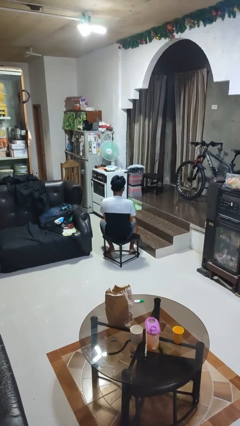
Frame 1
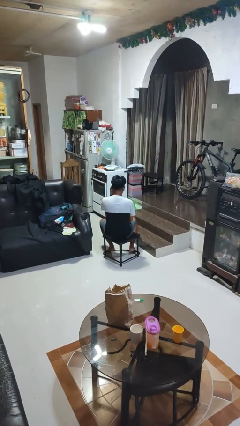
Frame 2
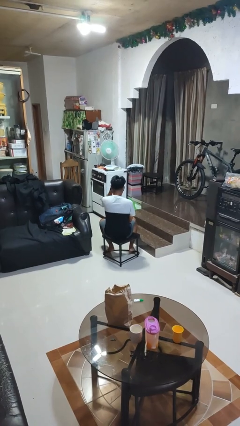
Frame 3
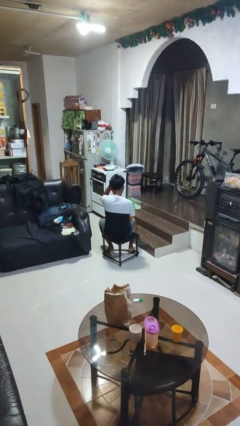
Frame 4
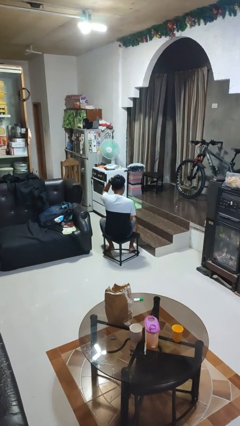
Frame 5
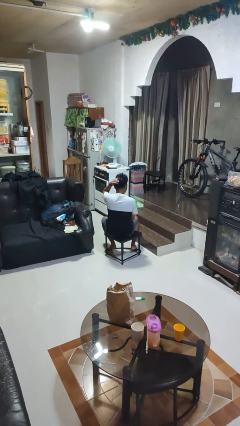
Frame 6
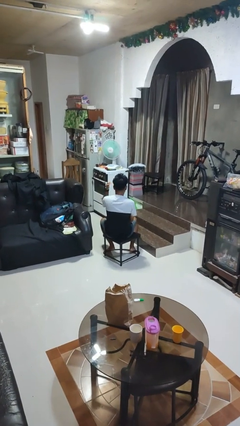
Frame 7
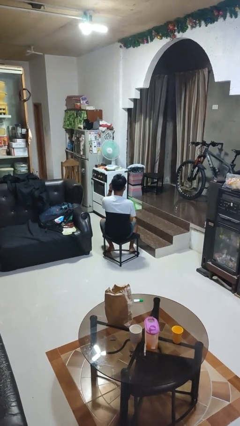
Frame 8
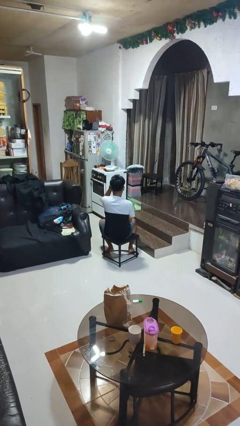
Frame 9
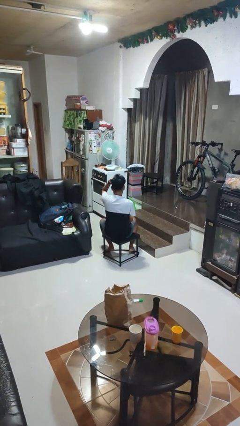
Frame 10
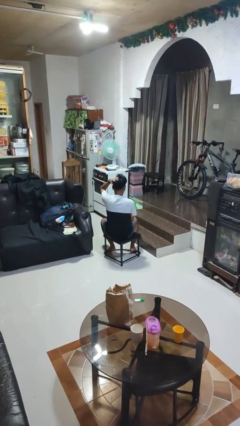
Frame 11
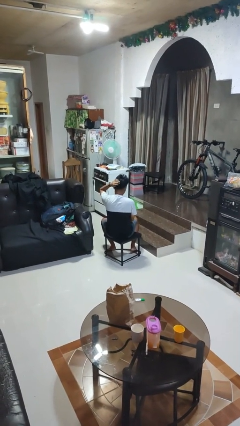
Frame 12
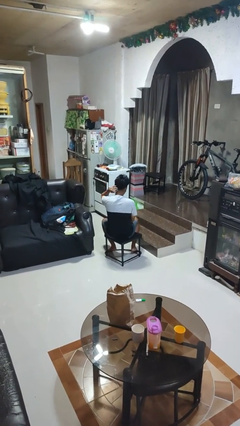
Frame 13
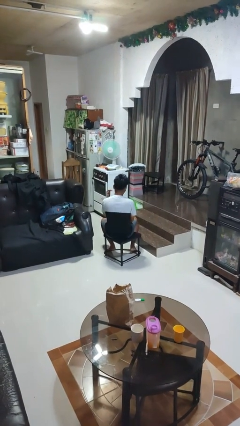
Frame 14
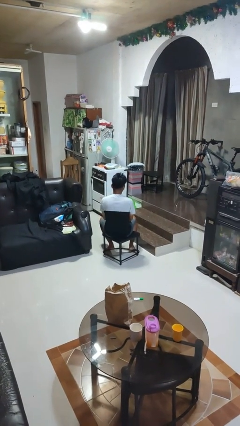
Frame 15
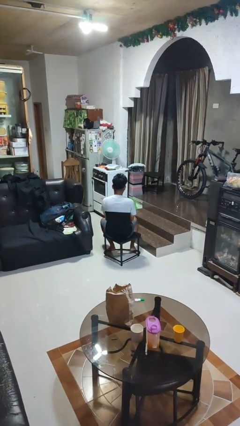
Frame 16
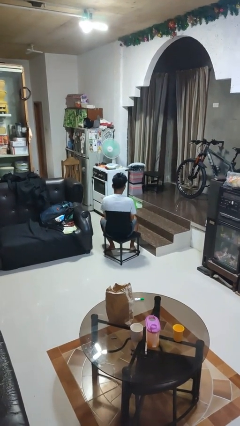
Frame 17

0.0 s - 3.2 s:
person strokes hair

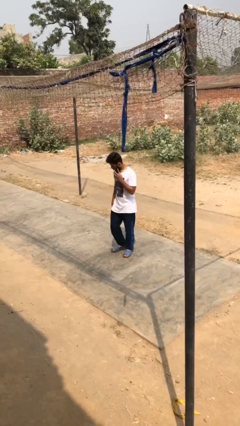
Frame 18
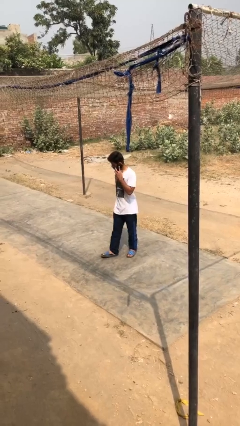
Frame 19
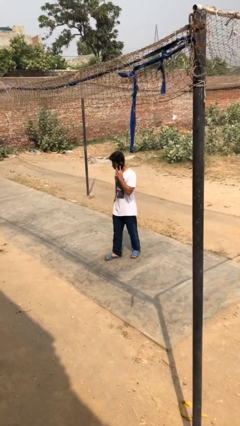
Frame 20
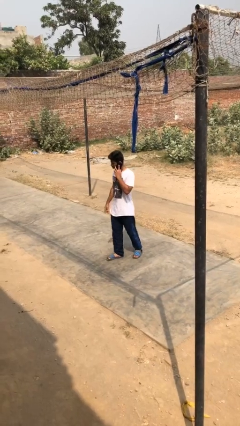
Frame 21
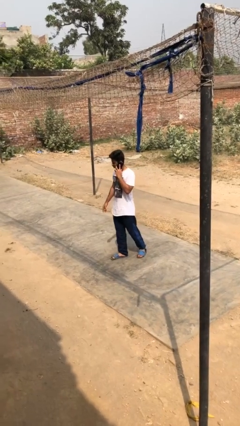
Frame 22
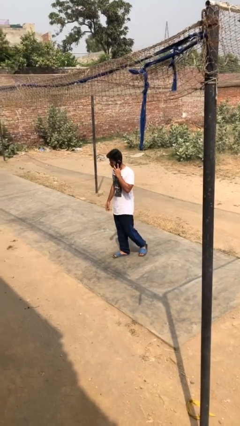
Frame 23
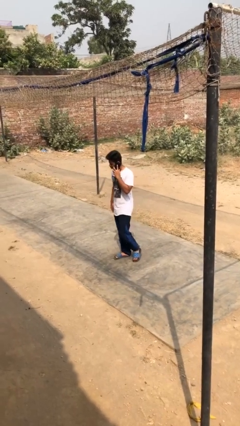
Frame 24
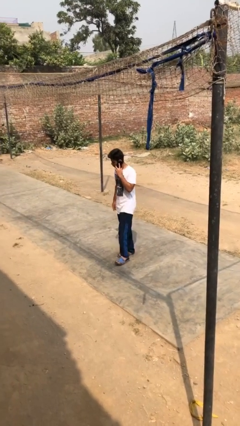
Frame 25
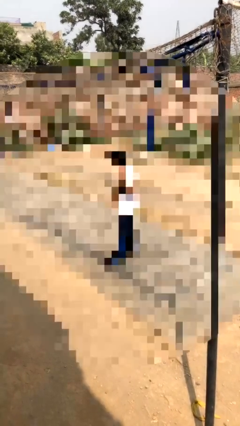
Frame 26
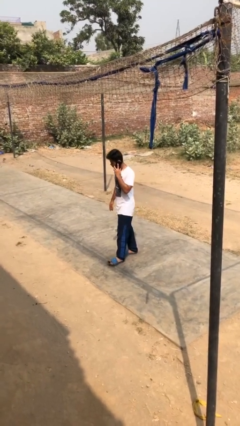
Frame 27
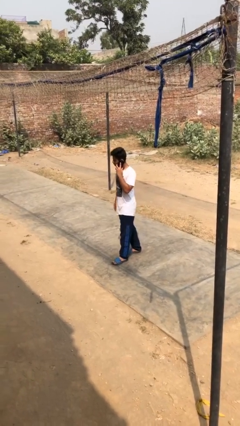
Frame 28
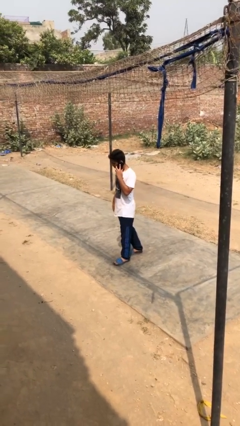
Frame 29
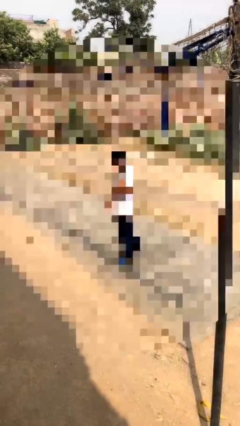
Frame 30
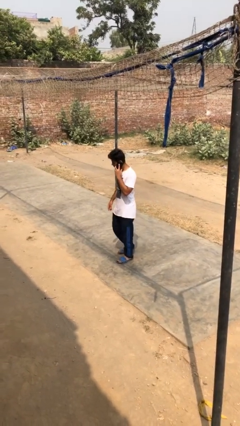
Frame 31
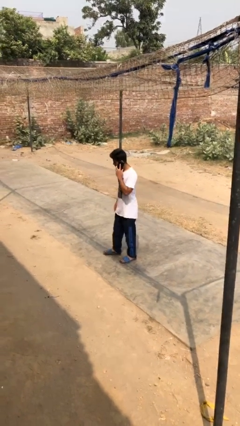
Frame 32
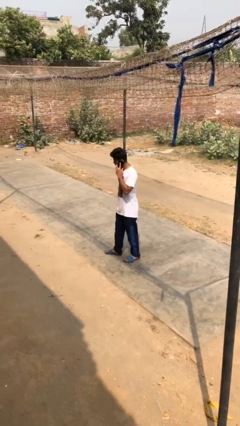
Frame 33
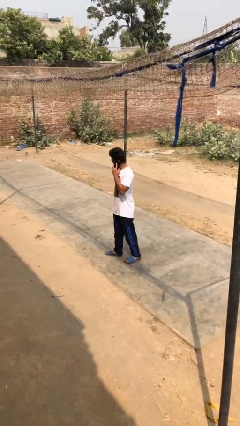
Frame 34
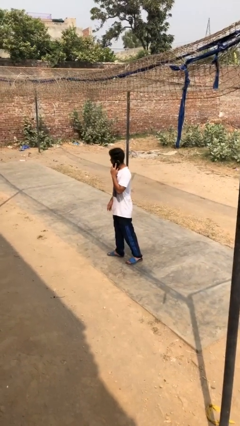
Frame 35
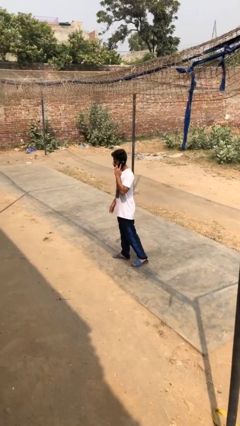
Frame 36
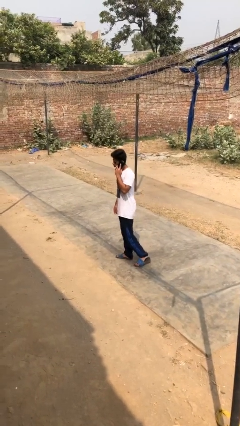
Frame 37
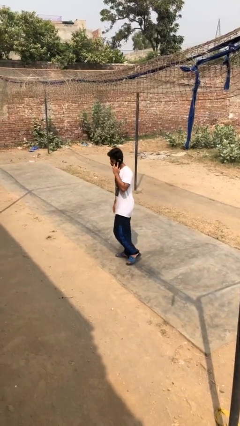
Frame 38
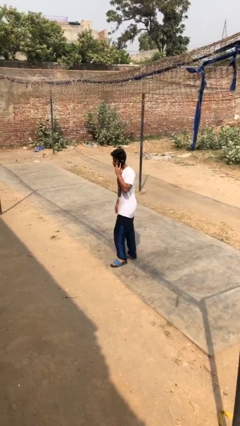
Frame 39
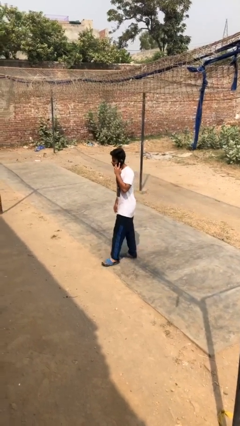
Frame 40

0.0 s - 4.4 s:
person talks on phone

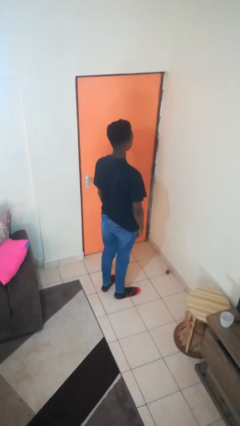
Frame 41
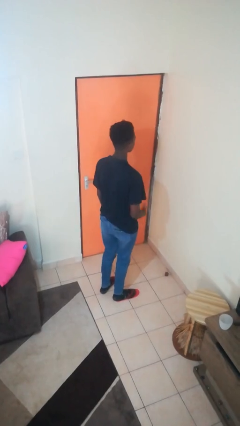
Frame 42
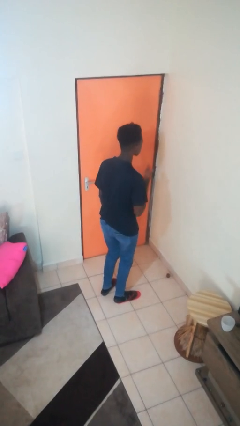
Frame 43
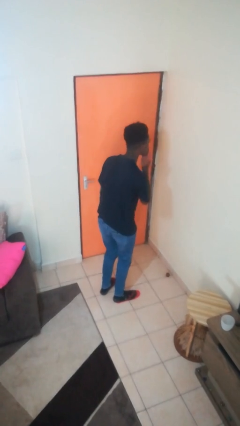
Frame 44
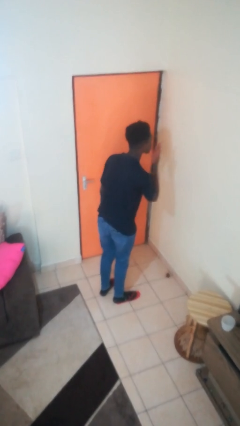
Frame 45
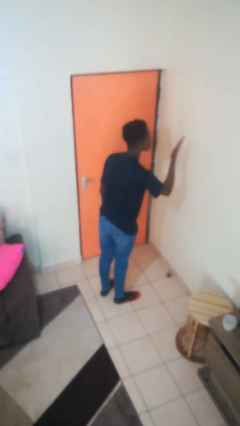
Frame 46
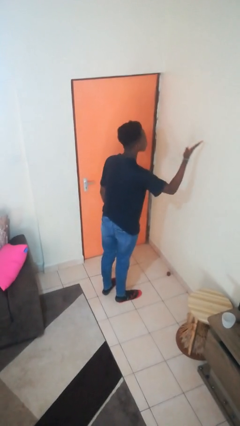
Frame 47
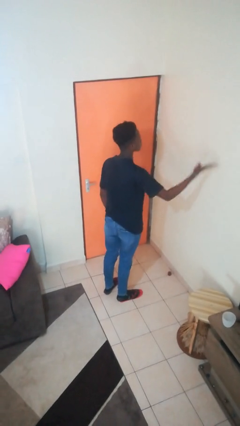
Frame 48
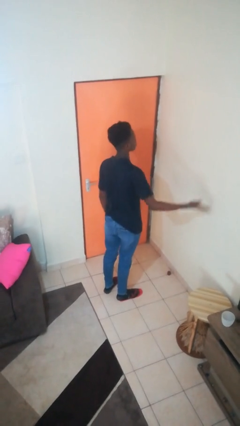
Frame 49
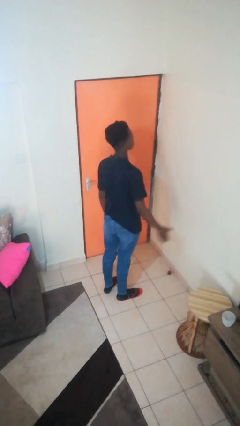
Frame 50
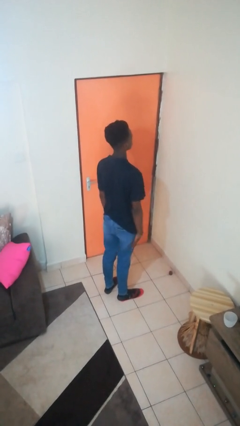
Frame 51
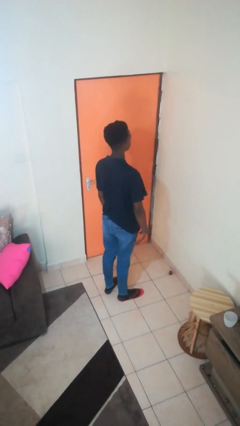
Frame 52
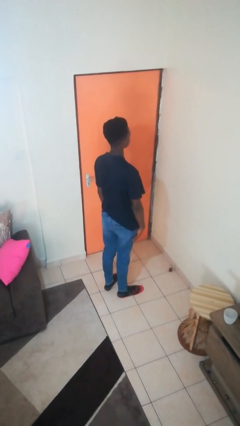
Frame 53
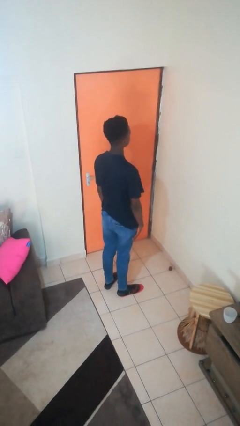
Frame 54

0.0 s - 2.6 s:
person gestures blow kiss

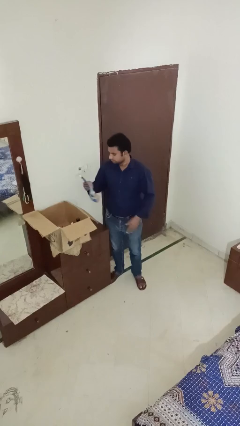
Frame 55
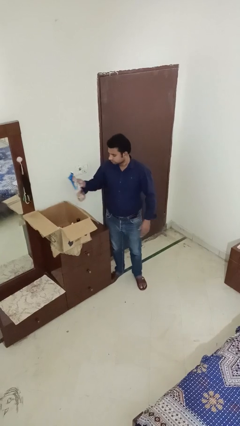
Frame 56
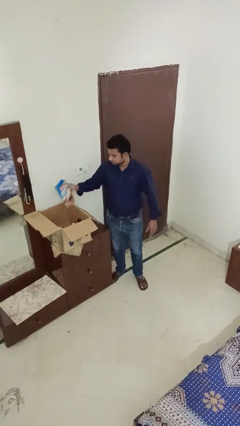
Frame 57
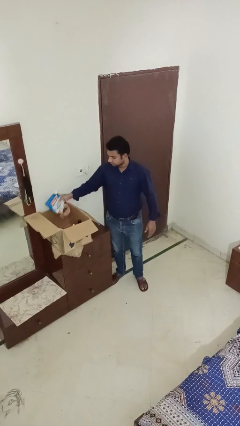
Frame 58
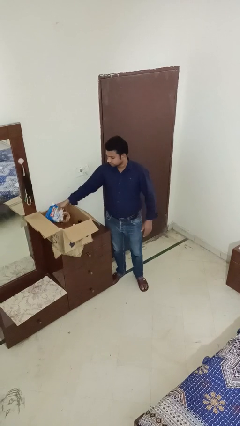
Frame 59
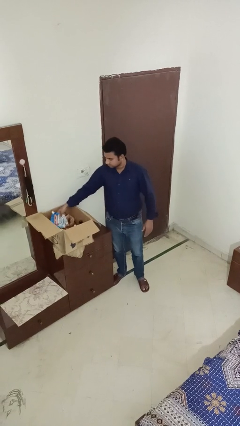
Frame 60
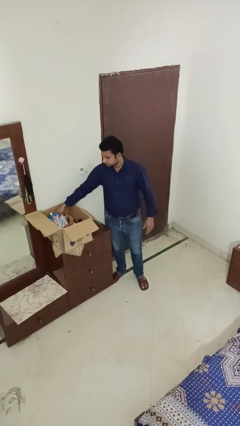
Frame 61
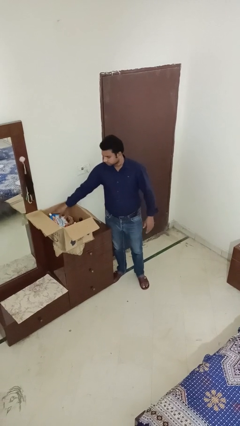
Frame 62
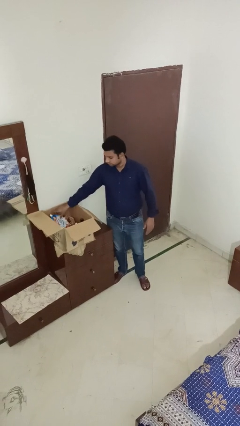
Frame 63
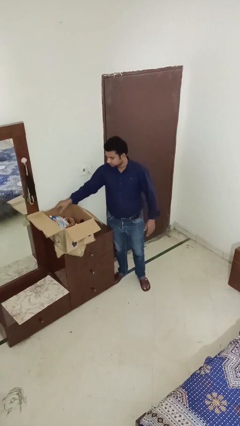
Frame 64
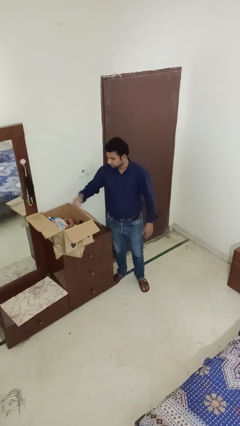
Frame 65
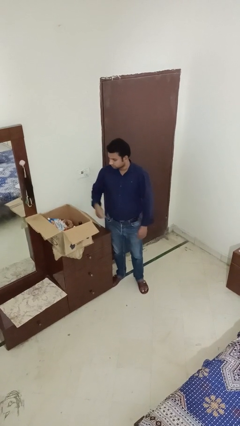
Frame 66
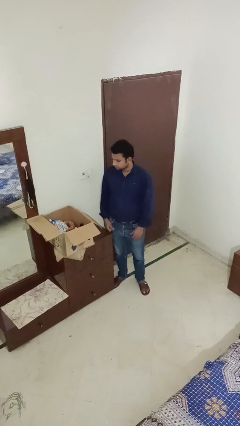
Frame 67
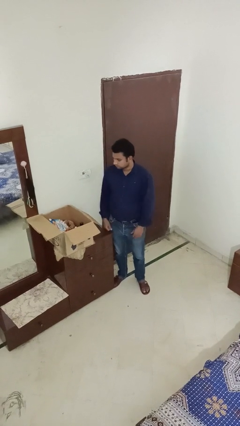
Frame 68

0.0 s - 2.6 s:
person puts object into box

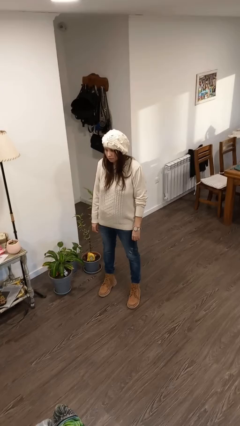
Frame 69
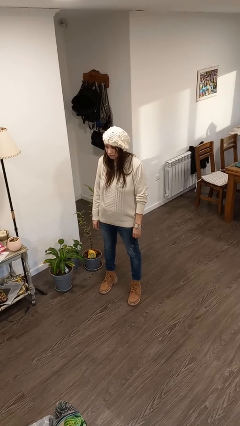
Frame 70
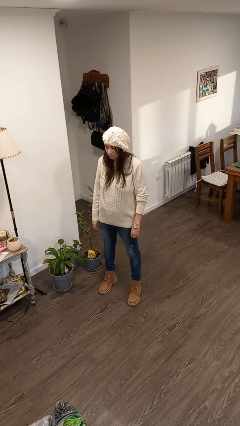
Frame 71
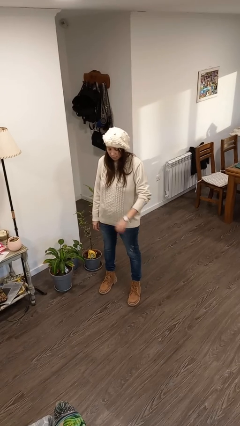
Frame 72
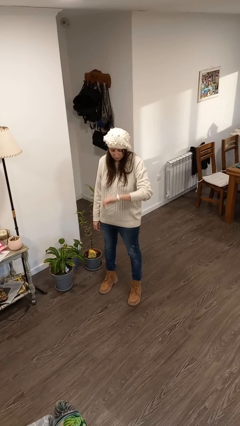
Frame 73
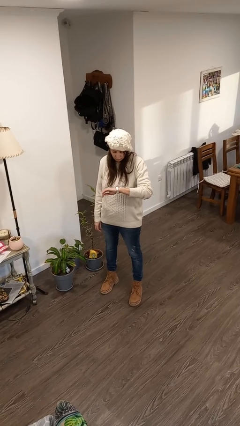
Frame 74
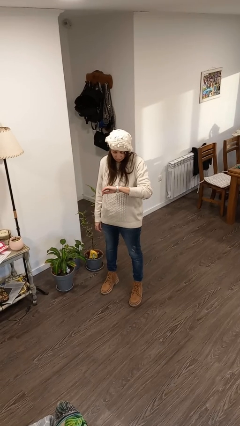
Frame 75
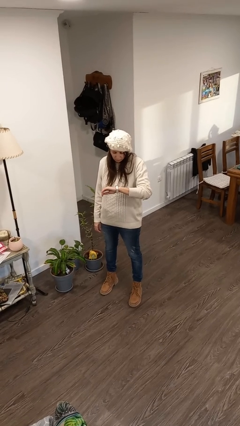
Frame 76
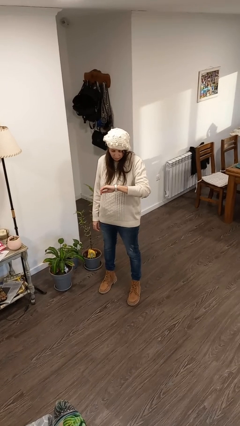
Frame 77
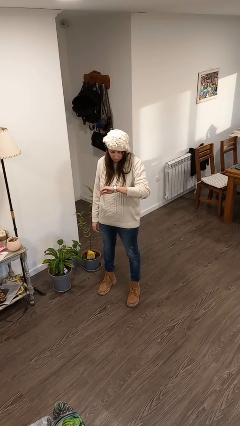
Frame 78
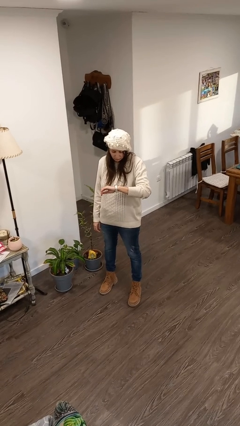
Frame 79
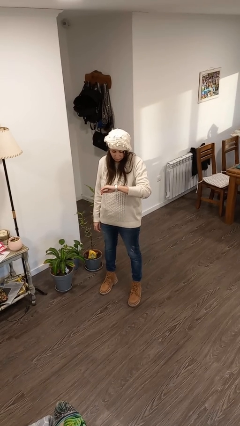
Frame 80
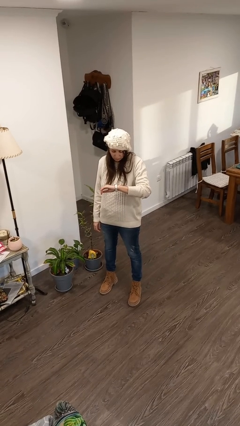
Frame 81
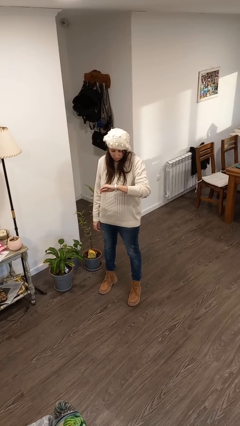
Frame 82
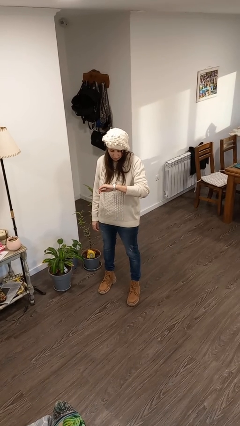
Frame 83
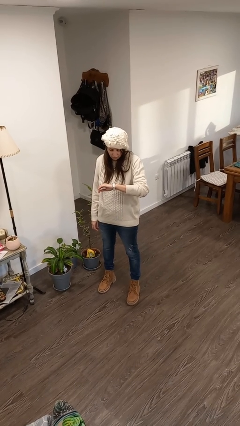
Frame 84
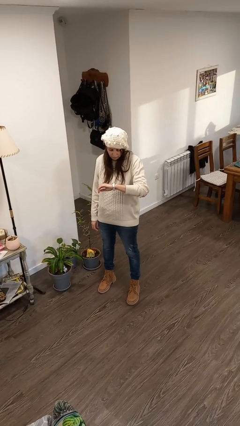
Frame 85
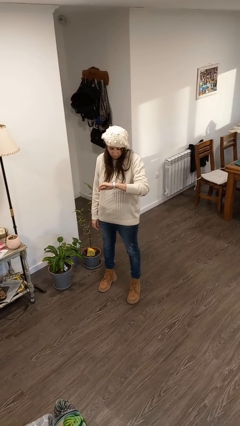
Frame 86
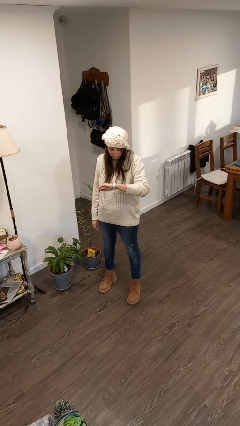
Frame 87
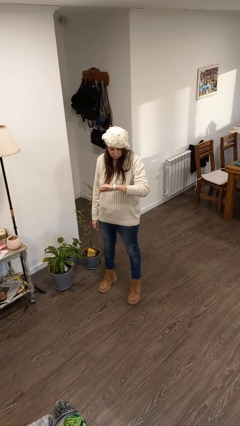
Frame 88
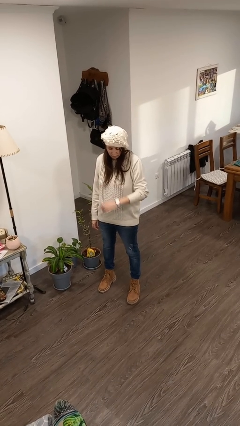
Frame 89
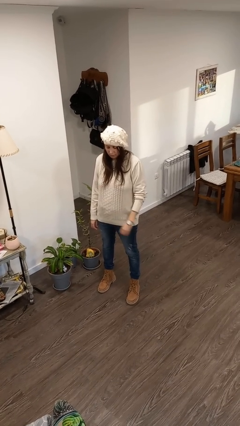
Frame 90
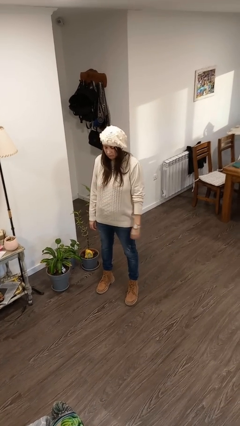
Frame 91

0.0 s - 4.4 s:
person looks at wristwatch

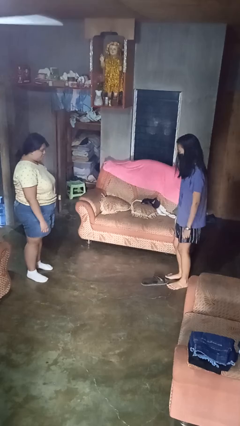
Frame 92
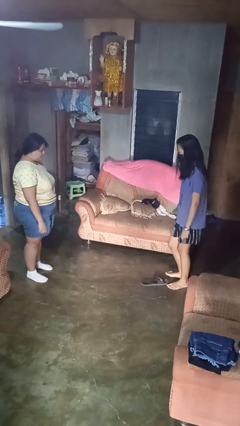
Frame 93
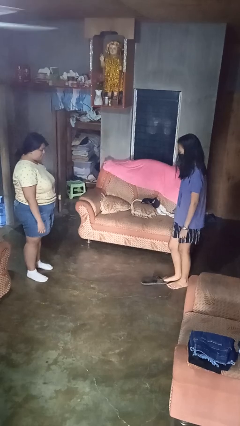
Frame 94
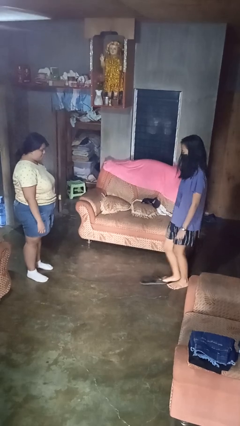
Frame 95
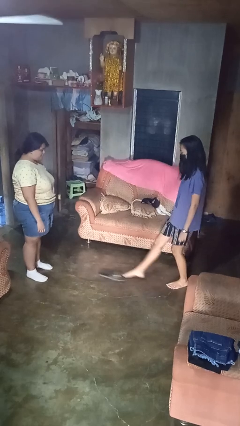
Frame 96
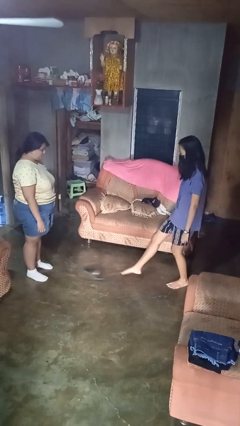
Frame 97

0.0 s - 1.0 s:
person kicks object to person
